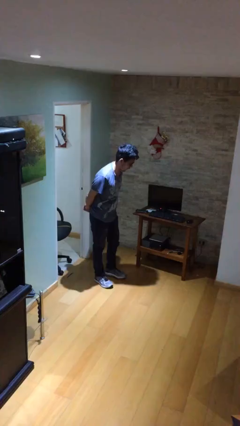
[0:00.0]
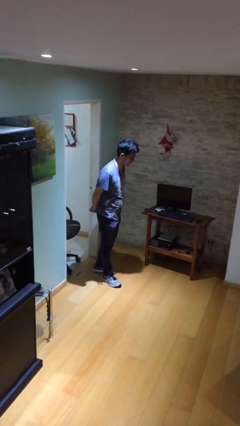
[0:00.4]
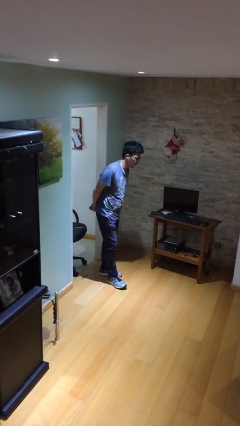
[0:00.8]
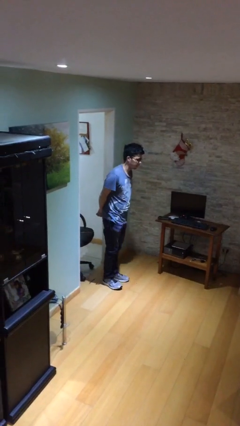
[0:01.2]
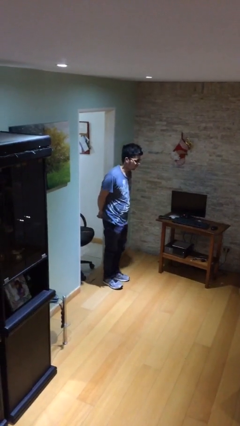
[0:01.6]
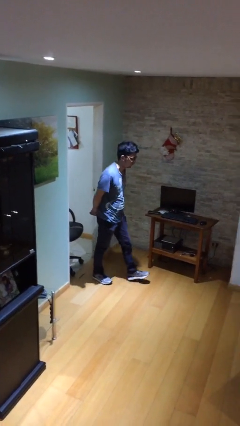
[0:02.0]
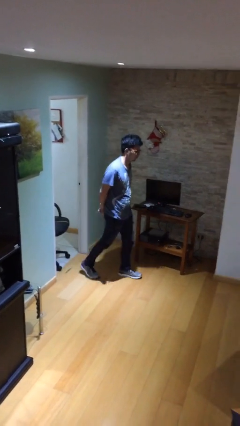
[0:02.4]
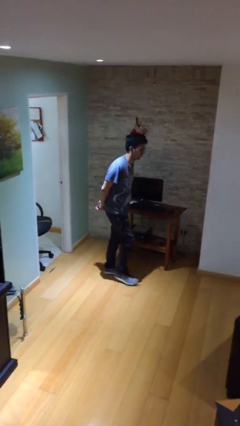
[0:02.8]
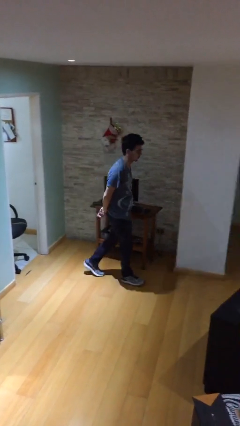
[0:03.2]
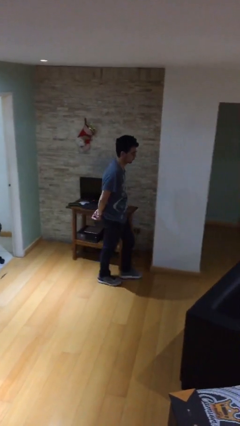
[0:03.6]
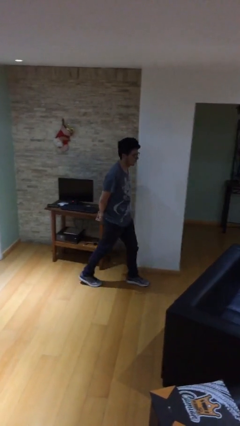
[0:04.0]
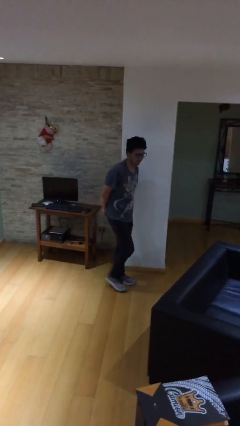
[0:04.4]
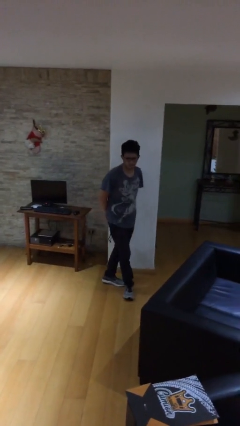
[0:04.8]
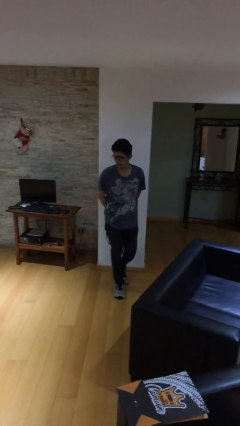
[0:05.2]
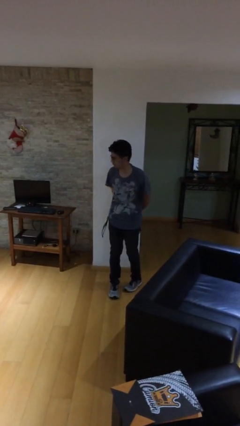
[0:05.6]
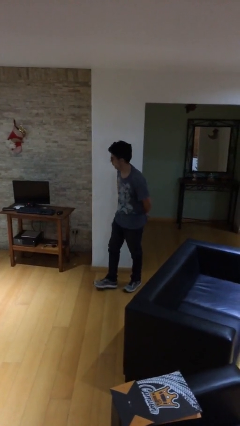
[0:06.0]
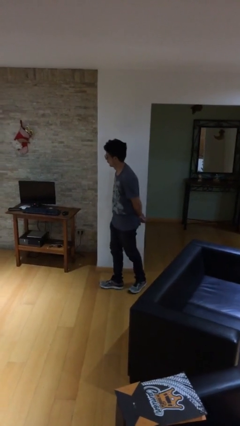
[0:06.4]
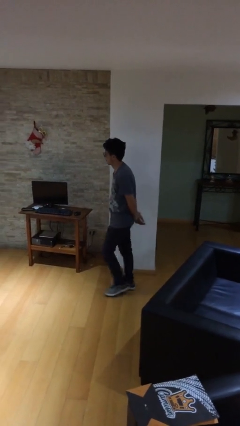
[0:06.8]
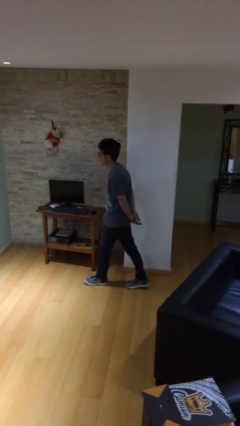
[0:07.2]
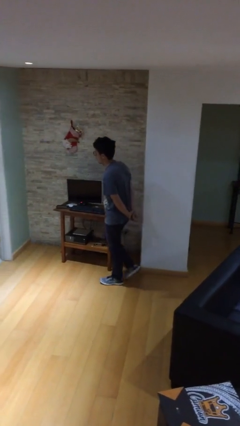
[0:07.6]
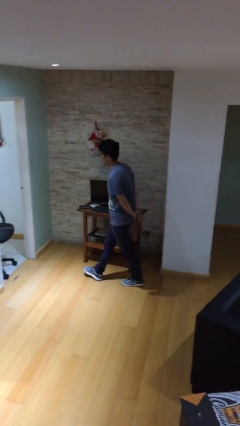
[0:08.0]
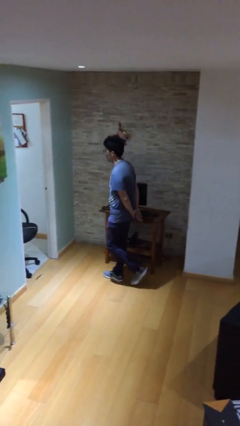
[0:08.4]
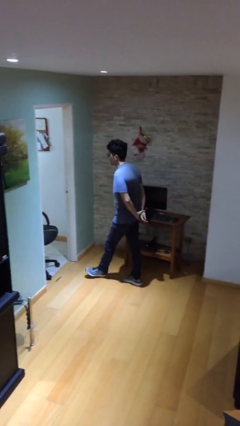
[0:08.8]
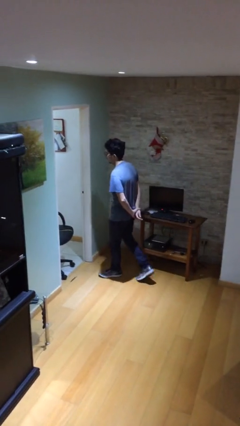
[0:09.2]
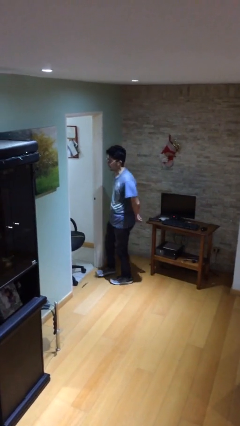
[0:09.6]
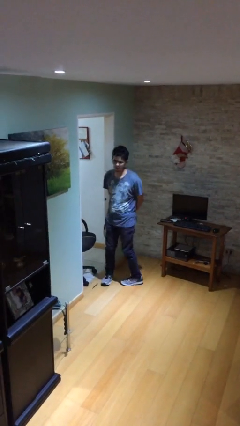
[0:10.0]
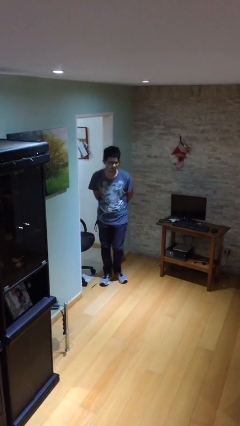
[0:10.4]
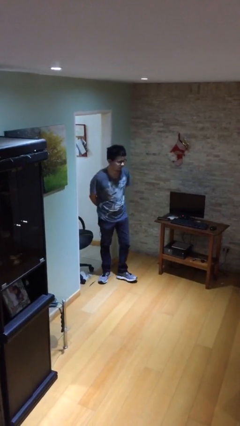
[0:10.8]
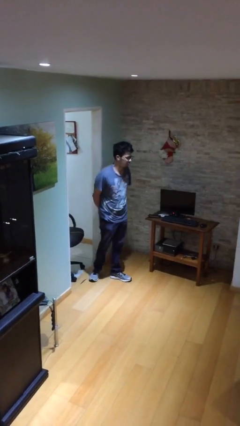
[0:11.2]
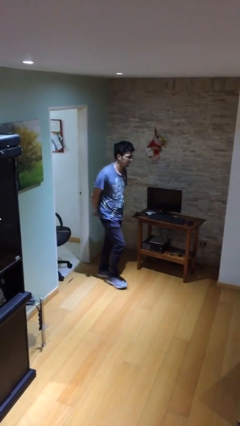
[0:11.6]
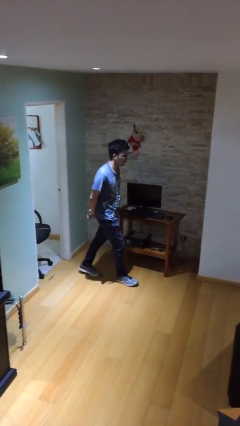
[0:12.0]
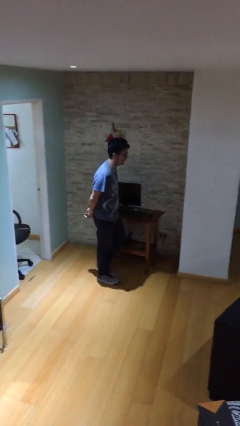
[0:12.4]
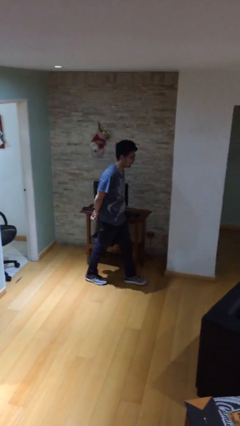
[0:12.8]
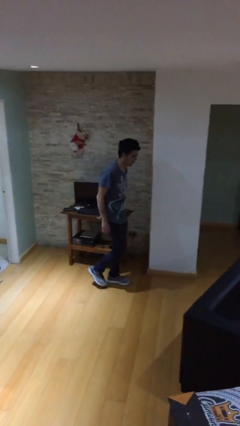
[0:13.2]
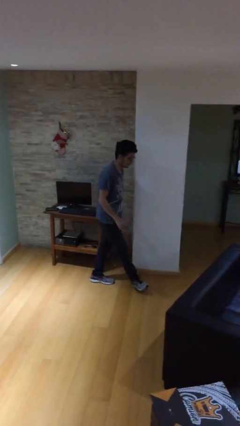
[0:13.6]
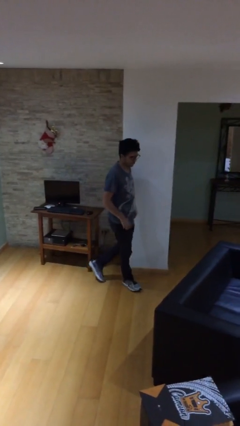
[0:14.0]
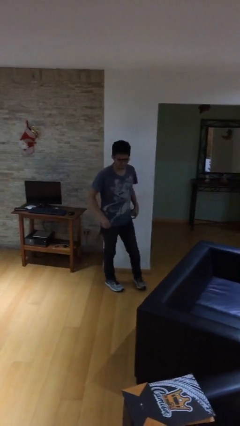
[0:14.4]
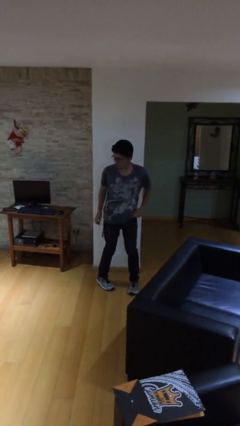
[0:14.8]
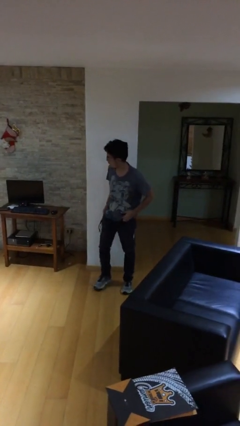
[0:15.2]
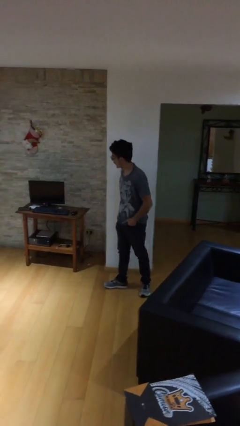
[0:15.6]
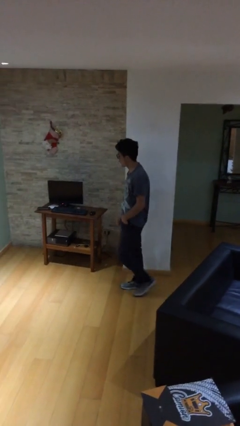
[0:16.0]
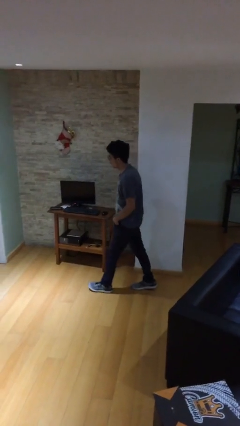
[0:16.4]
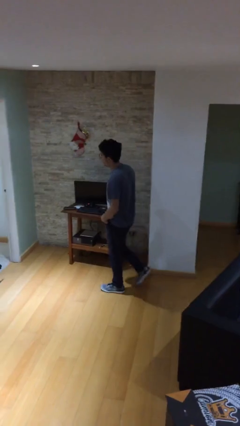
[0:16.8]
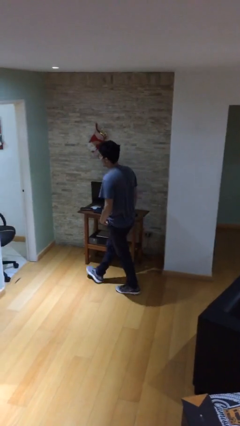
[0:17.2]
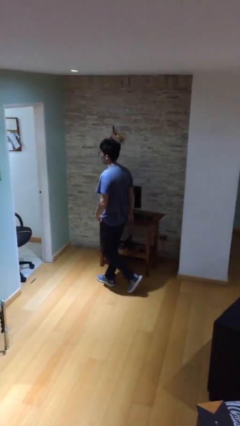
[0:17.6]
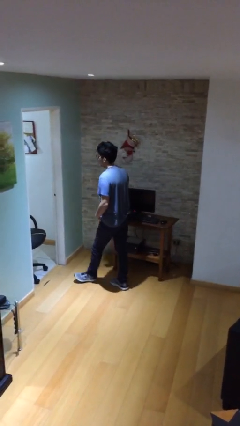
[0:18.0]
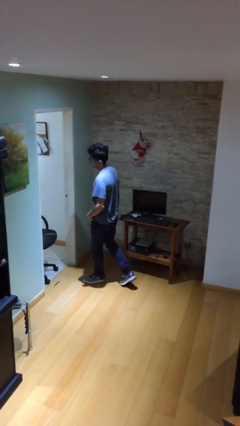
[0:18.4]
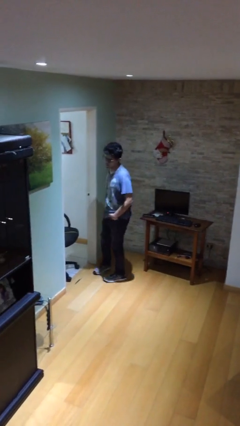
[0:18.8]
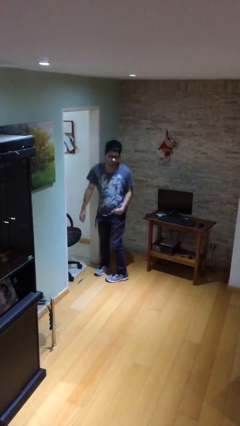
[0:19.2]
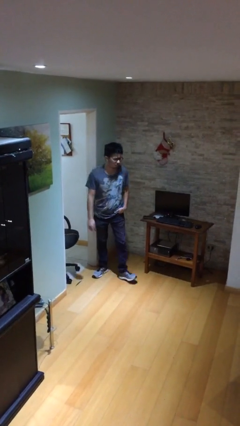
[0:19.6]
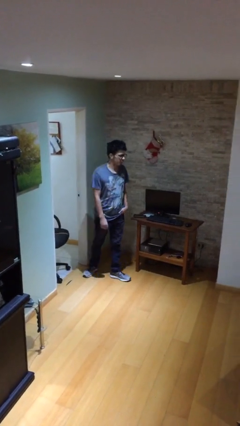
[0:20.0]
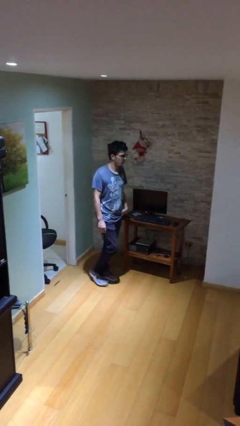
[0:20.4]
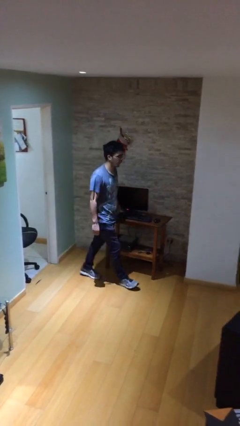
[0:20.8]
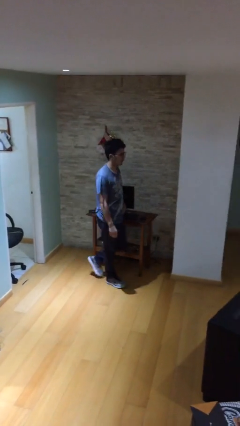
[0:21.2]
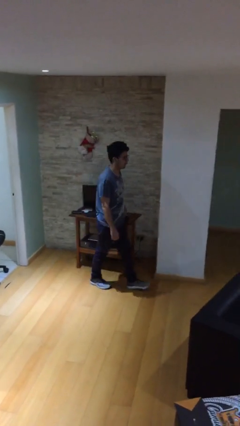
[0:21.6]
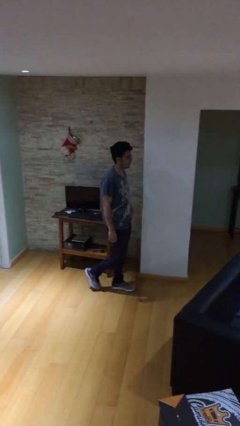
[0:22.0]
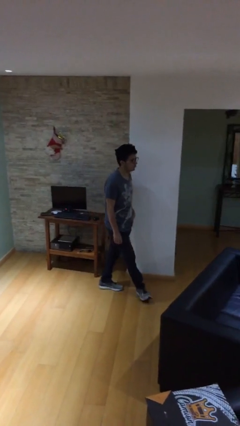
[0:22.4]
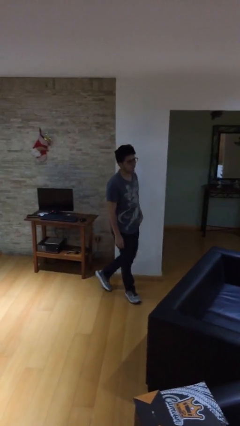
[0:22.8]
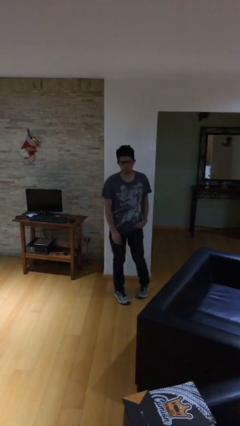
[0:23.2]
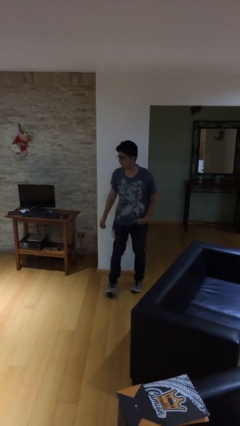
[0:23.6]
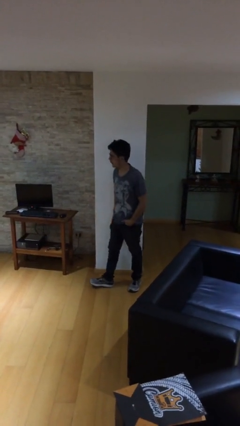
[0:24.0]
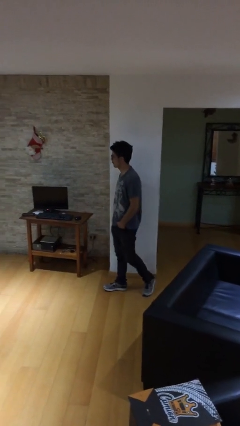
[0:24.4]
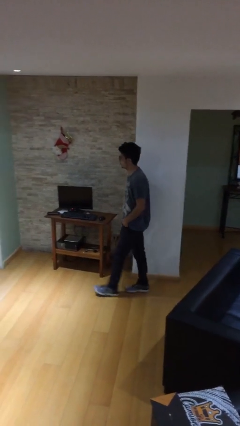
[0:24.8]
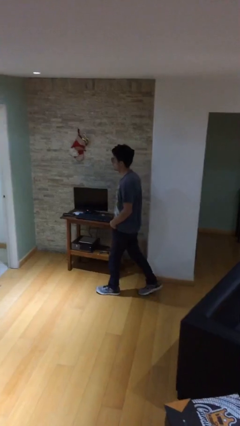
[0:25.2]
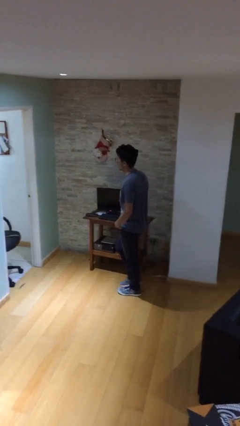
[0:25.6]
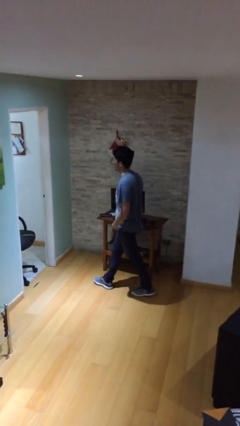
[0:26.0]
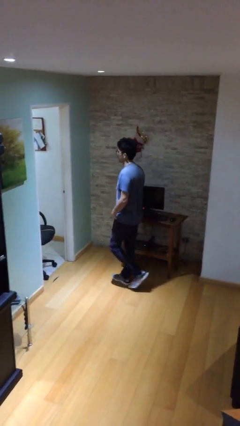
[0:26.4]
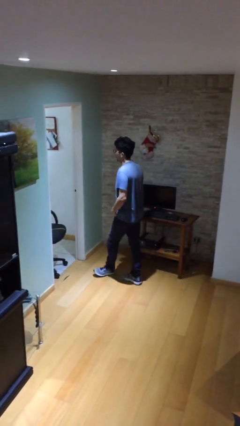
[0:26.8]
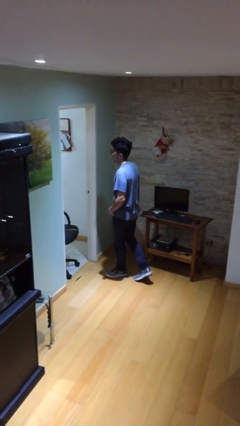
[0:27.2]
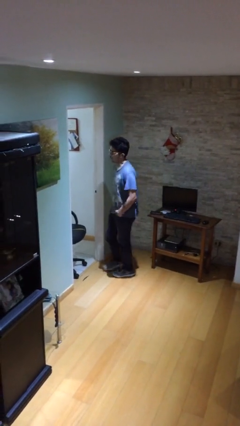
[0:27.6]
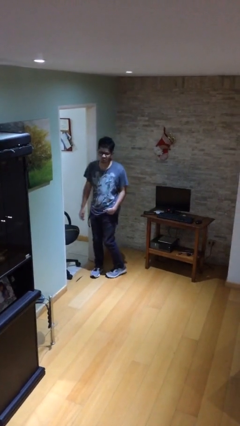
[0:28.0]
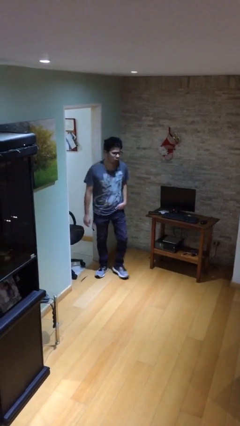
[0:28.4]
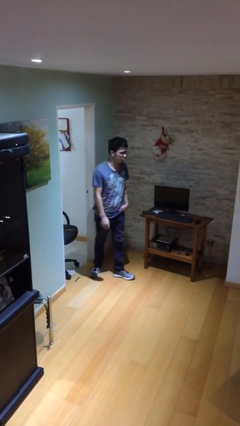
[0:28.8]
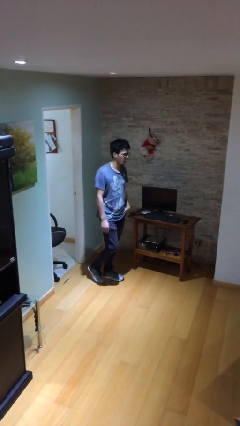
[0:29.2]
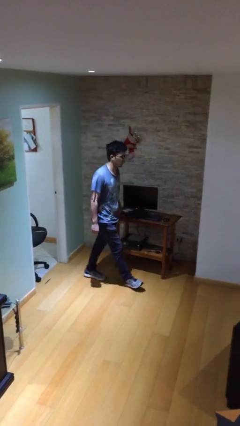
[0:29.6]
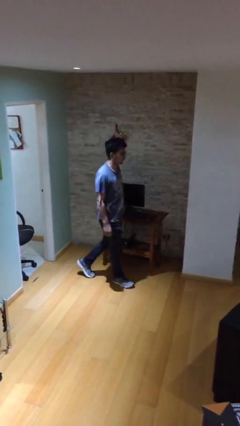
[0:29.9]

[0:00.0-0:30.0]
person walks

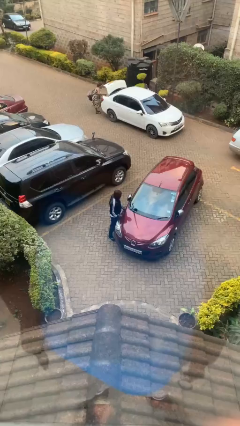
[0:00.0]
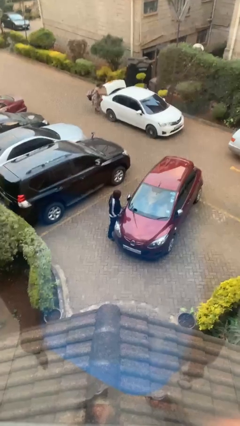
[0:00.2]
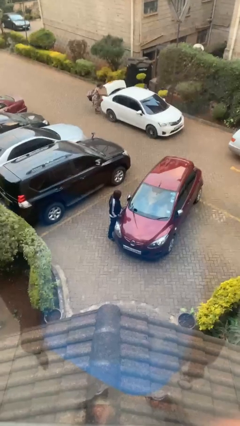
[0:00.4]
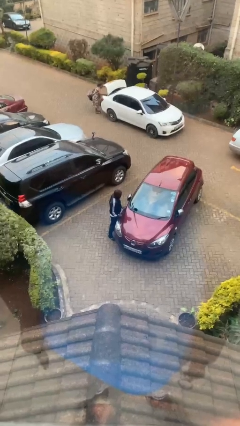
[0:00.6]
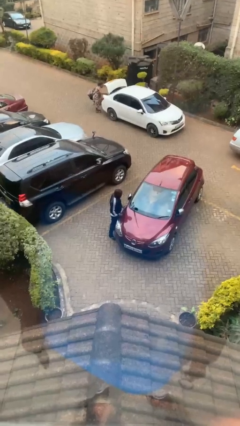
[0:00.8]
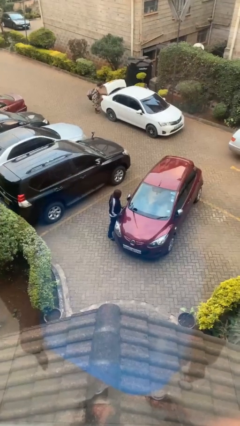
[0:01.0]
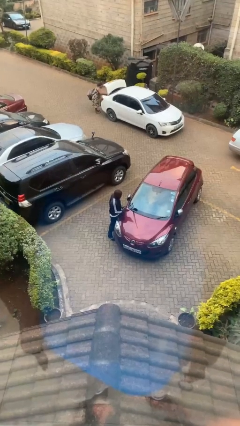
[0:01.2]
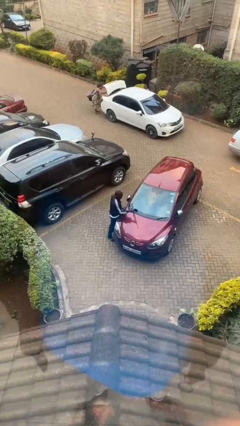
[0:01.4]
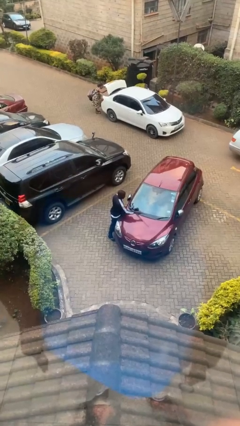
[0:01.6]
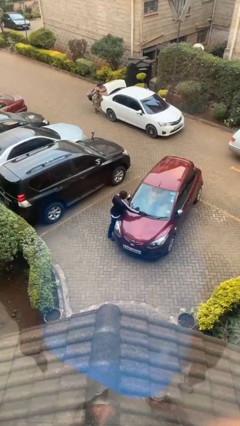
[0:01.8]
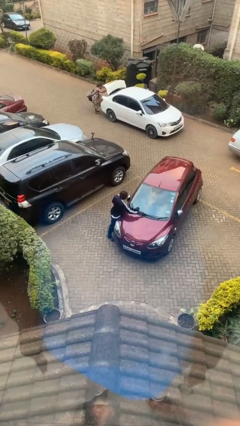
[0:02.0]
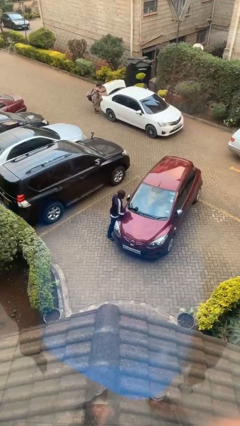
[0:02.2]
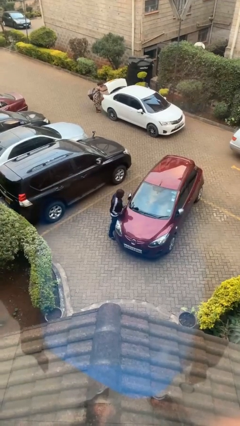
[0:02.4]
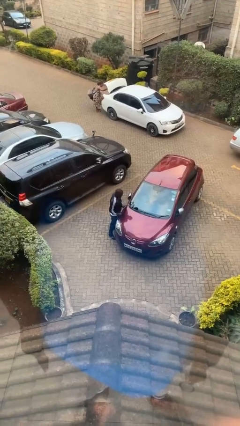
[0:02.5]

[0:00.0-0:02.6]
person flips down car wipers

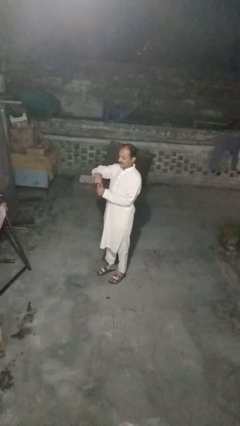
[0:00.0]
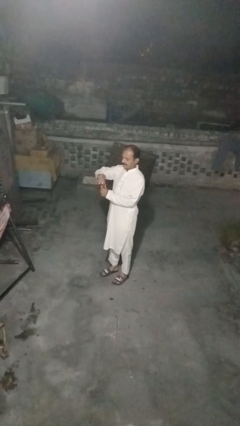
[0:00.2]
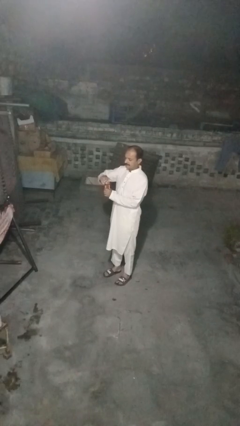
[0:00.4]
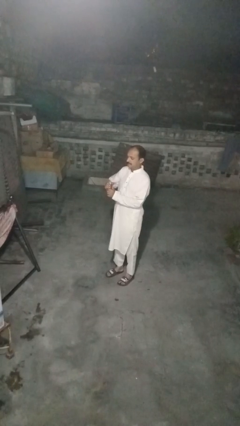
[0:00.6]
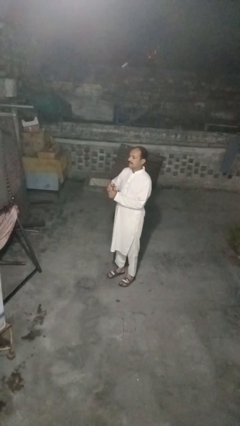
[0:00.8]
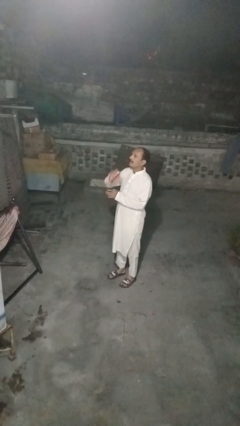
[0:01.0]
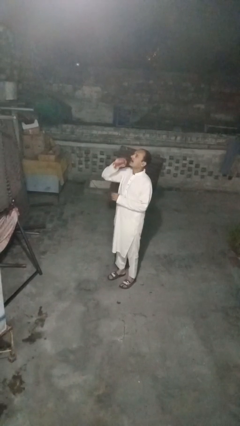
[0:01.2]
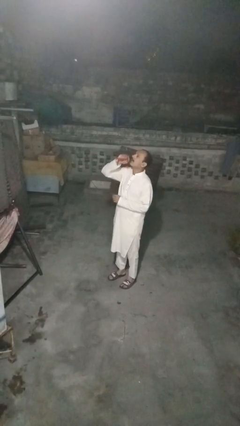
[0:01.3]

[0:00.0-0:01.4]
person drinks from beverage can
